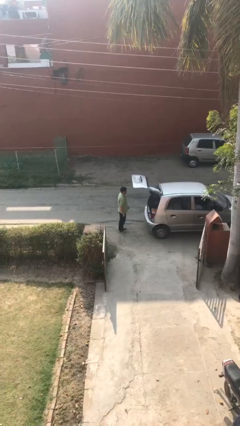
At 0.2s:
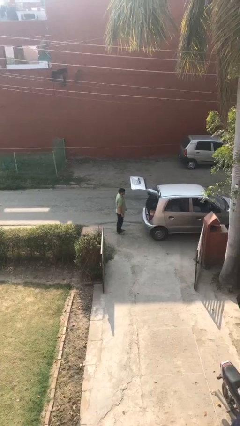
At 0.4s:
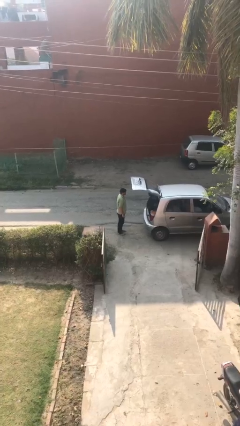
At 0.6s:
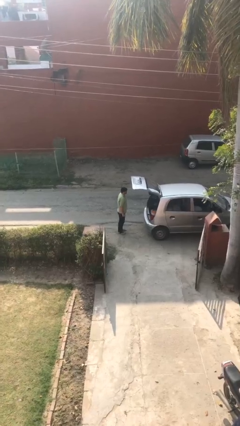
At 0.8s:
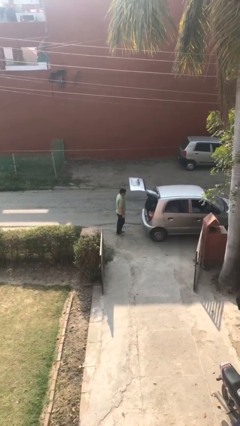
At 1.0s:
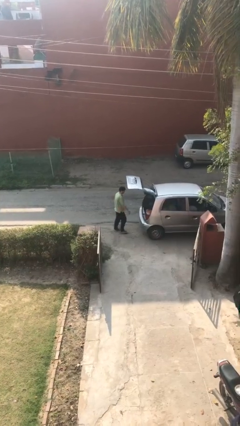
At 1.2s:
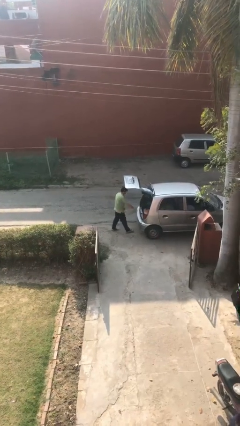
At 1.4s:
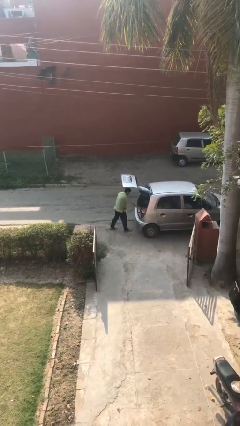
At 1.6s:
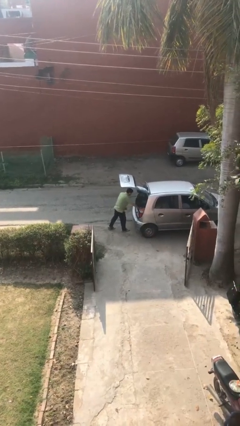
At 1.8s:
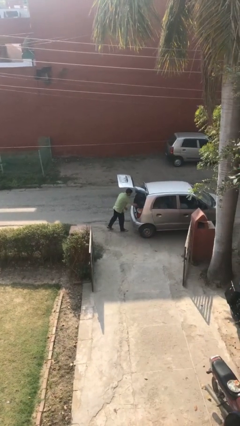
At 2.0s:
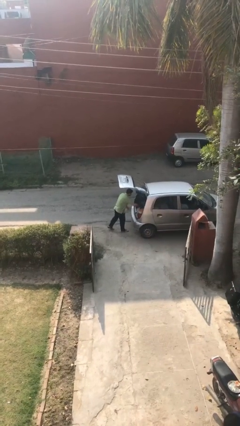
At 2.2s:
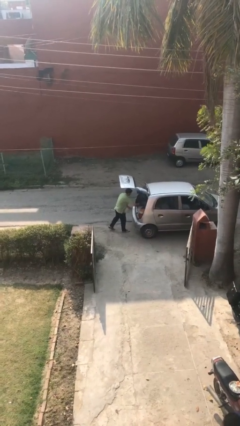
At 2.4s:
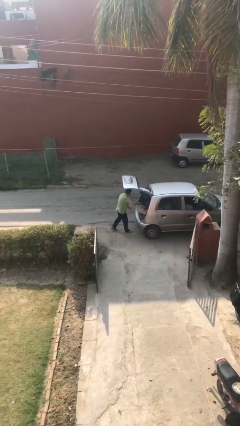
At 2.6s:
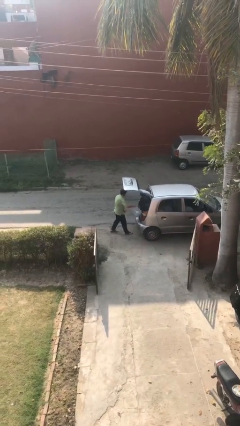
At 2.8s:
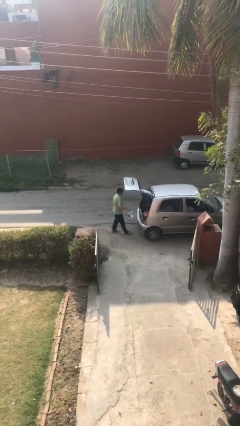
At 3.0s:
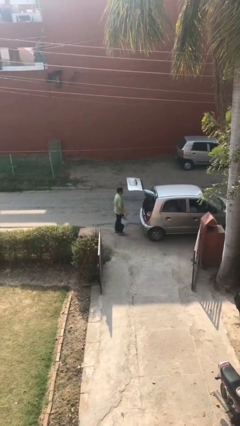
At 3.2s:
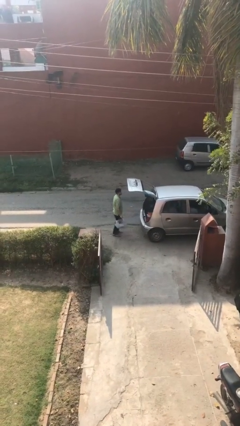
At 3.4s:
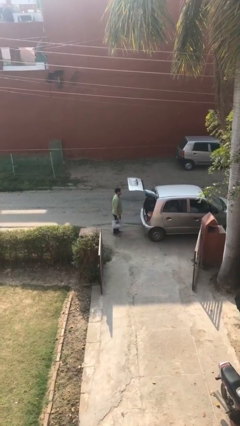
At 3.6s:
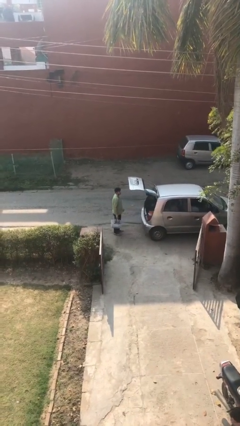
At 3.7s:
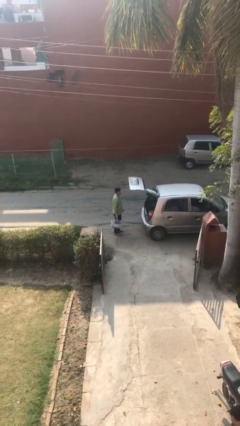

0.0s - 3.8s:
person unloads car

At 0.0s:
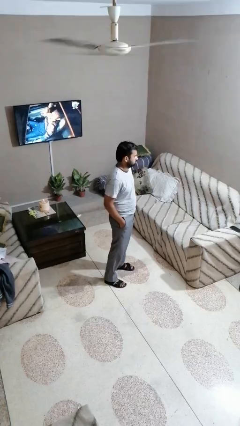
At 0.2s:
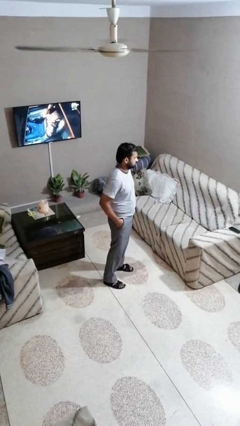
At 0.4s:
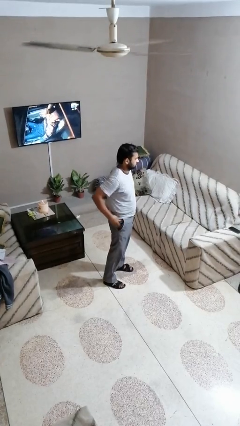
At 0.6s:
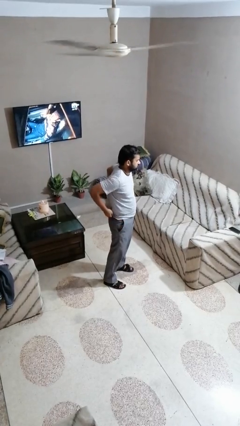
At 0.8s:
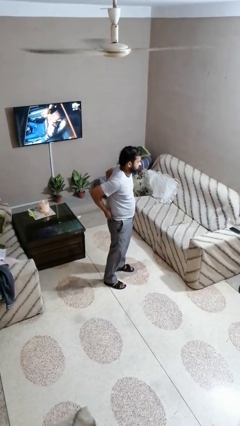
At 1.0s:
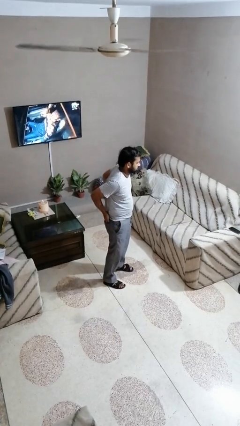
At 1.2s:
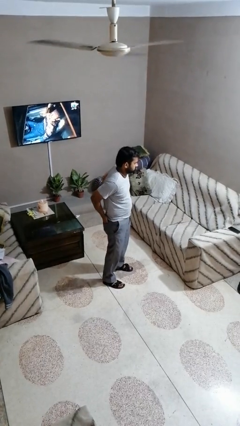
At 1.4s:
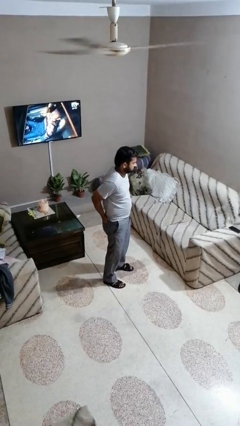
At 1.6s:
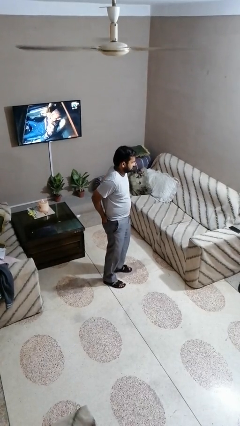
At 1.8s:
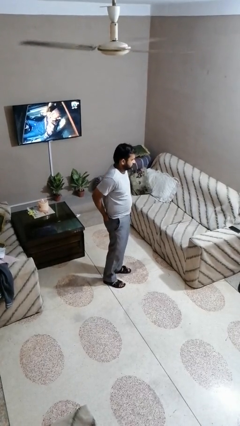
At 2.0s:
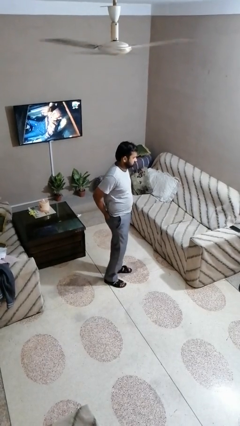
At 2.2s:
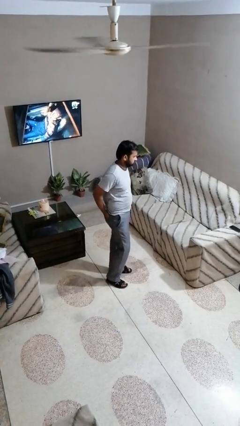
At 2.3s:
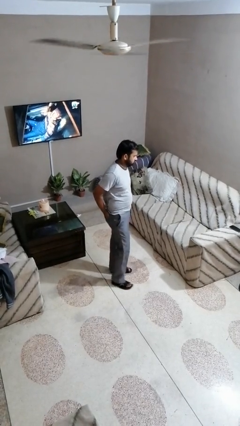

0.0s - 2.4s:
person puts hands in back pockets

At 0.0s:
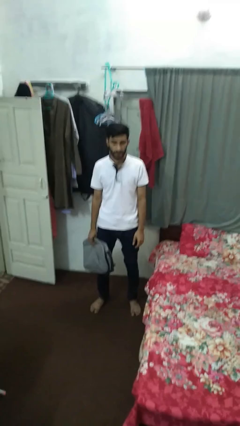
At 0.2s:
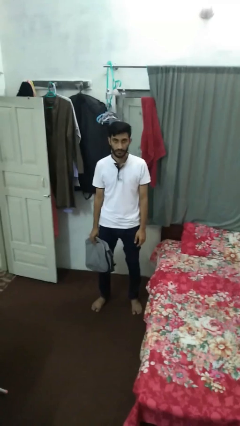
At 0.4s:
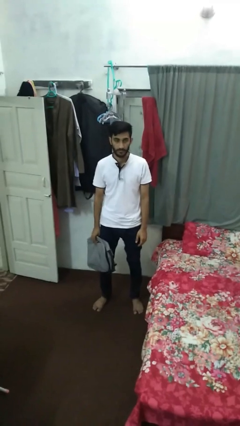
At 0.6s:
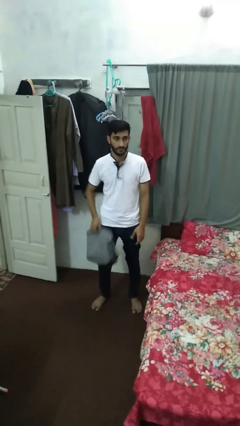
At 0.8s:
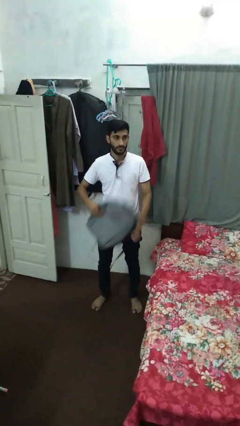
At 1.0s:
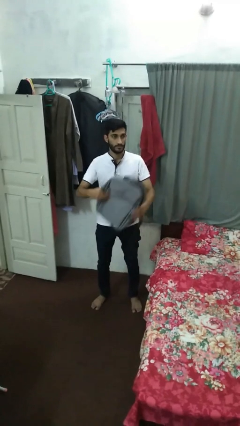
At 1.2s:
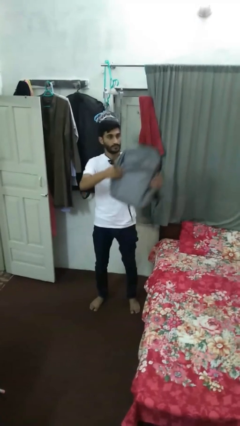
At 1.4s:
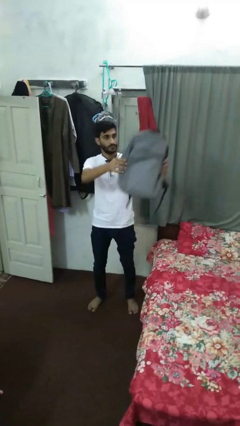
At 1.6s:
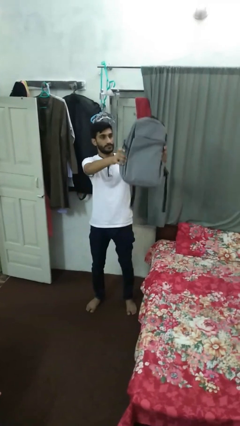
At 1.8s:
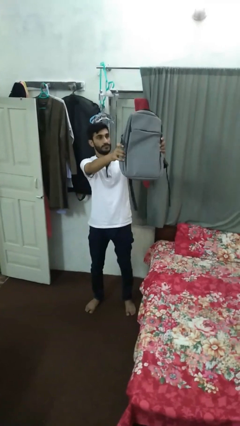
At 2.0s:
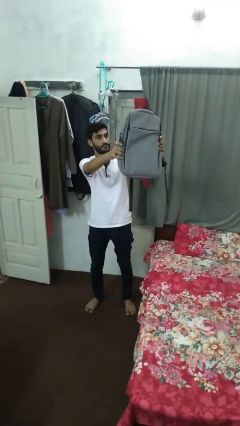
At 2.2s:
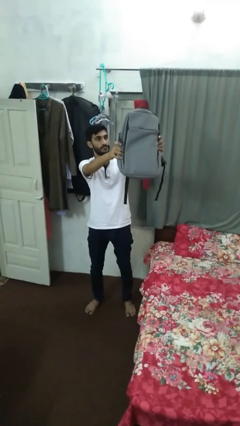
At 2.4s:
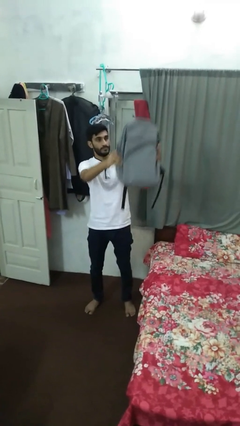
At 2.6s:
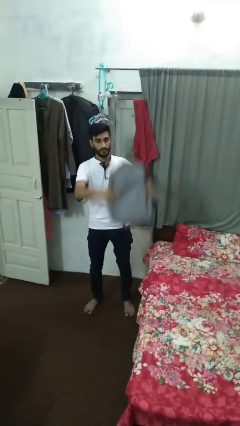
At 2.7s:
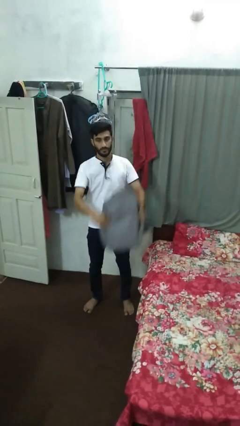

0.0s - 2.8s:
person holds object above head

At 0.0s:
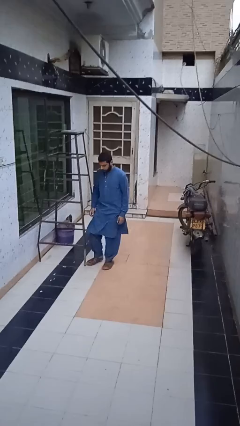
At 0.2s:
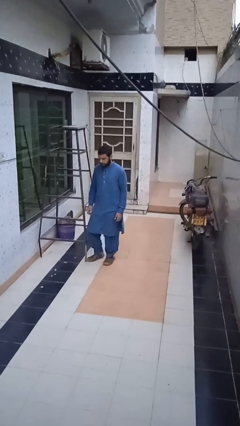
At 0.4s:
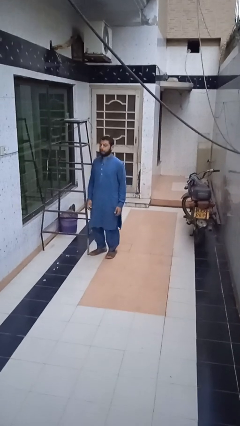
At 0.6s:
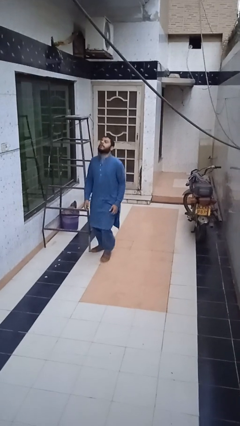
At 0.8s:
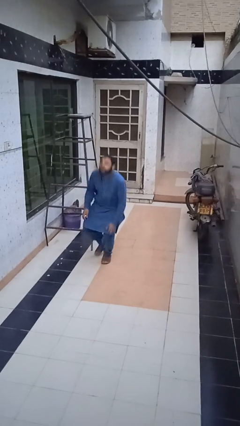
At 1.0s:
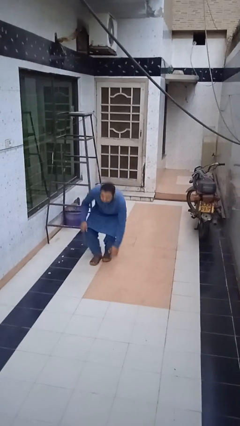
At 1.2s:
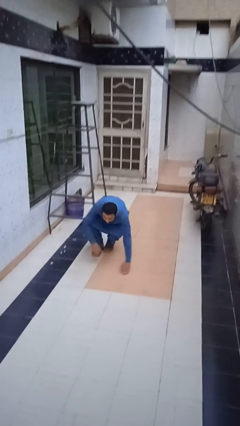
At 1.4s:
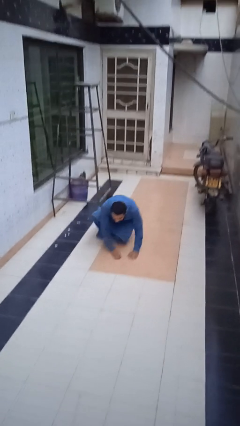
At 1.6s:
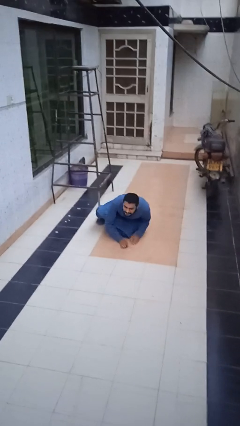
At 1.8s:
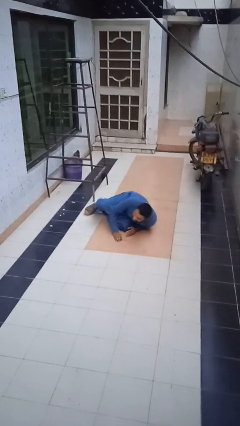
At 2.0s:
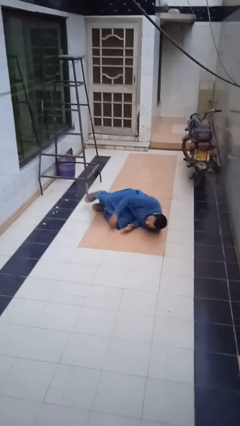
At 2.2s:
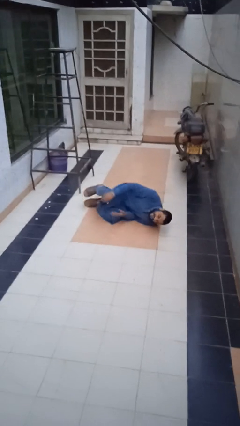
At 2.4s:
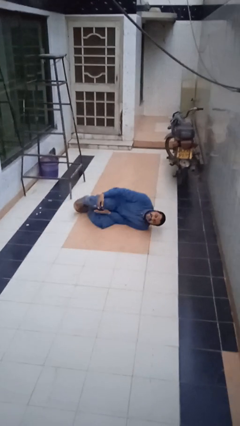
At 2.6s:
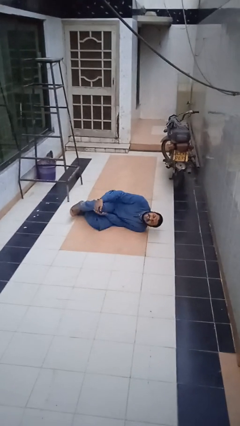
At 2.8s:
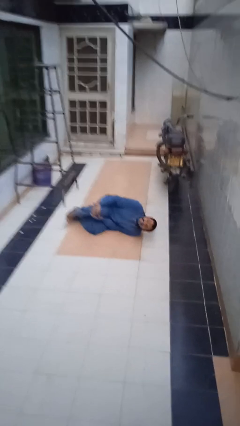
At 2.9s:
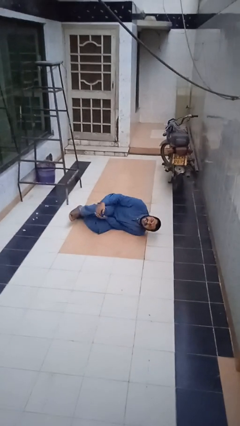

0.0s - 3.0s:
person trips on object on floor

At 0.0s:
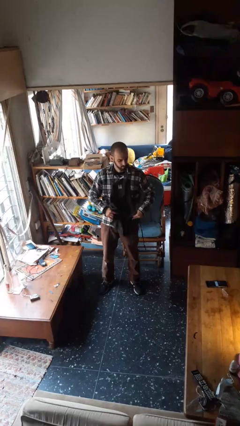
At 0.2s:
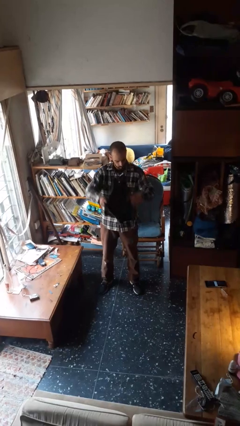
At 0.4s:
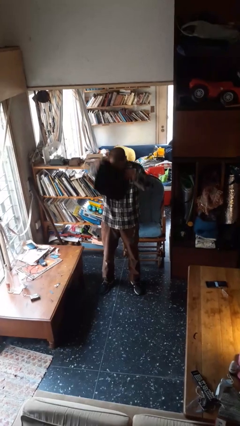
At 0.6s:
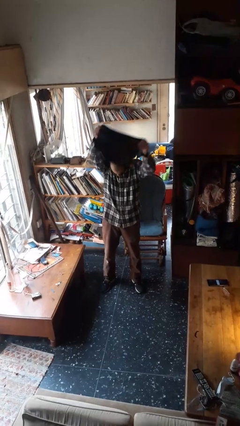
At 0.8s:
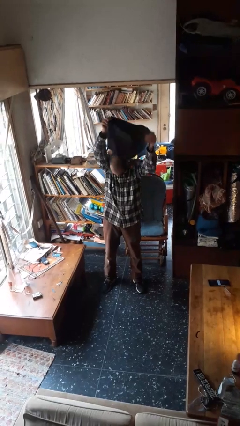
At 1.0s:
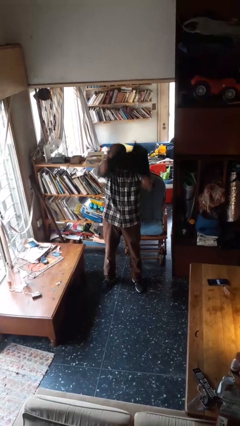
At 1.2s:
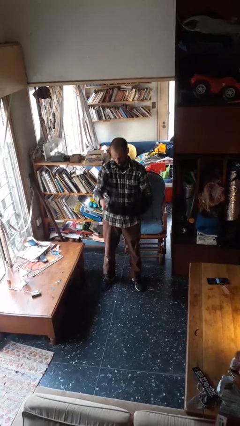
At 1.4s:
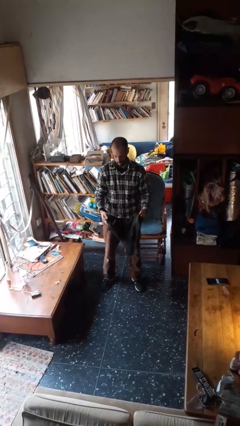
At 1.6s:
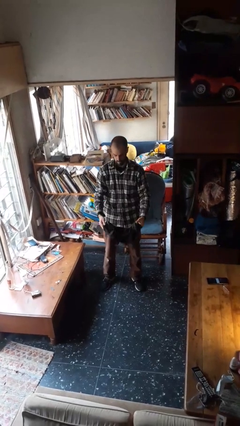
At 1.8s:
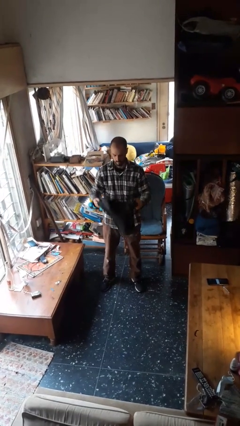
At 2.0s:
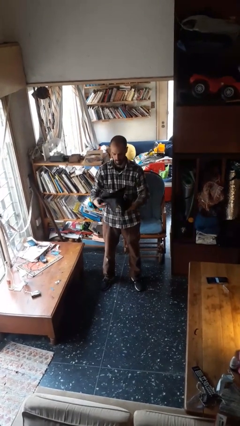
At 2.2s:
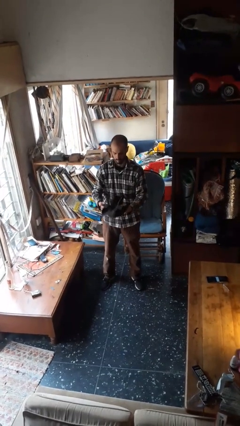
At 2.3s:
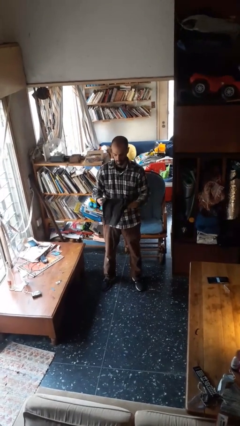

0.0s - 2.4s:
person takes off apron

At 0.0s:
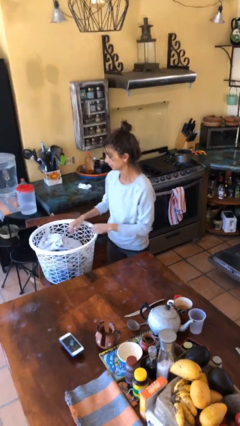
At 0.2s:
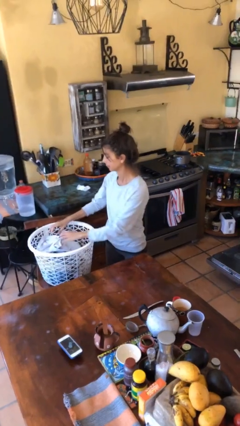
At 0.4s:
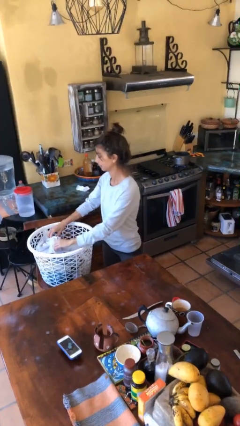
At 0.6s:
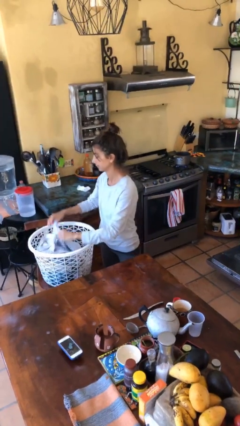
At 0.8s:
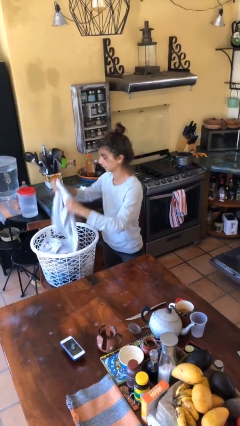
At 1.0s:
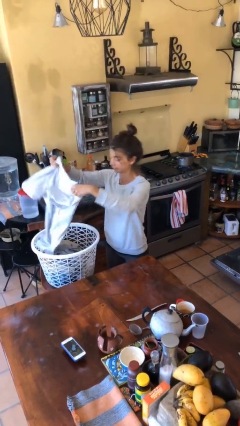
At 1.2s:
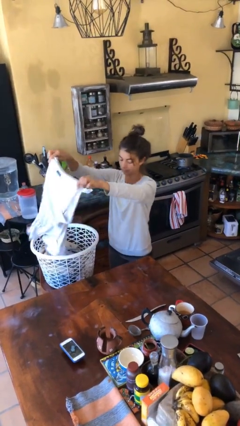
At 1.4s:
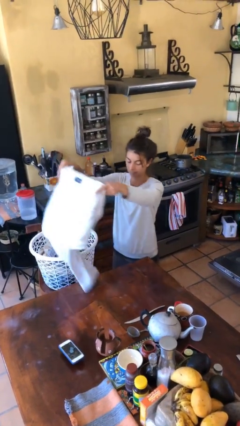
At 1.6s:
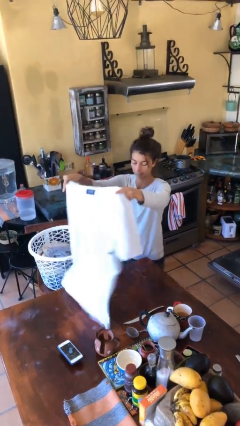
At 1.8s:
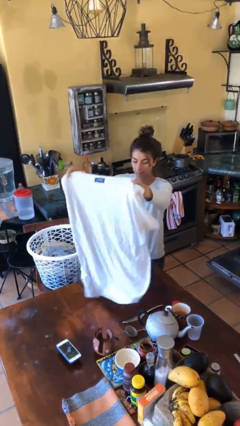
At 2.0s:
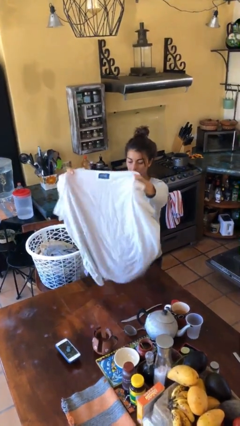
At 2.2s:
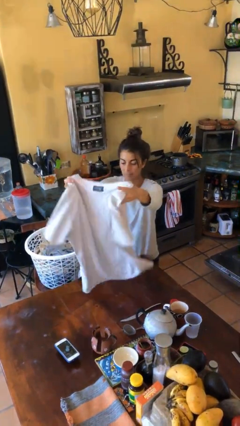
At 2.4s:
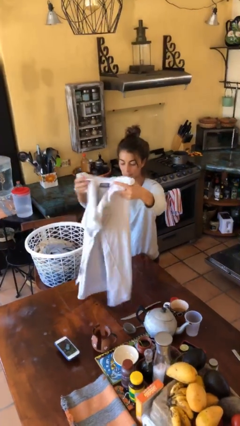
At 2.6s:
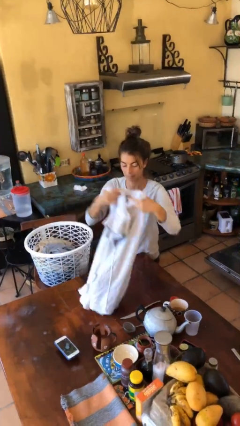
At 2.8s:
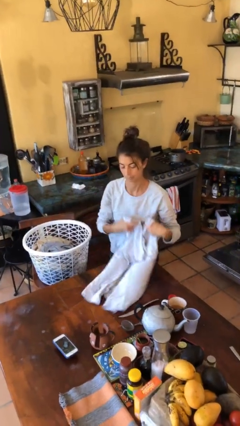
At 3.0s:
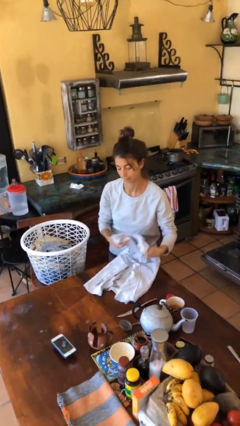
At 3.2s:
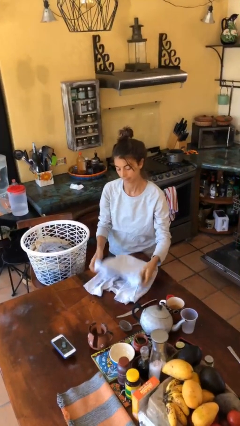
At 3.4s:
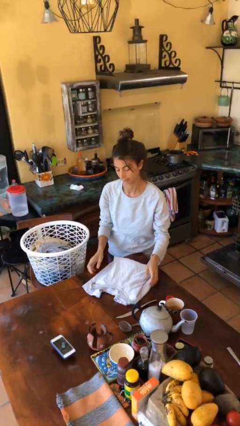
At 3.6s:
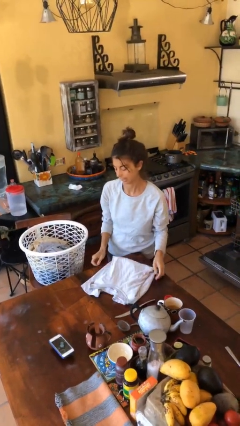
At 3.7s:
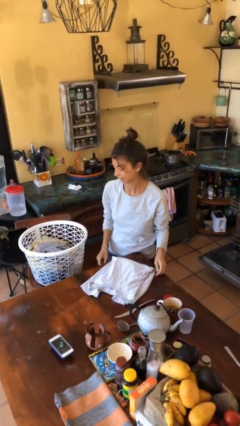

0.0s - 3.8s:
person folds shirt
